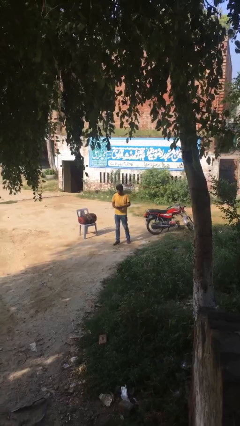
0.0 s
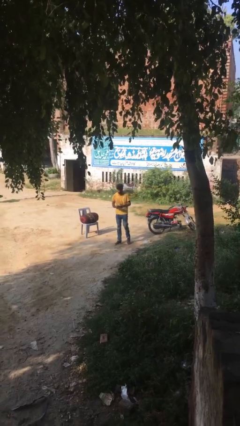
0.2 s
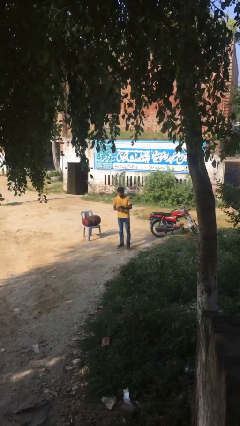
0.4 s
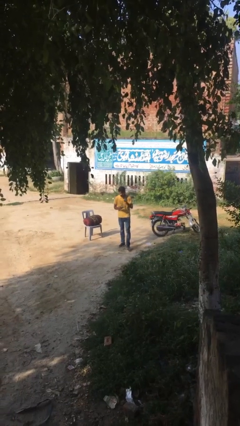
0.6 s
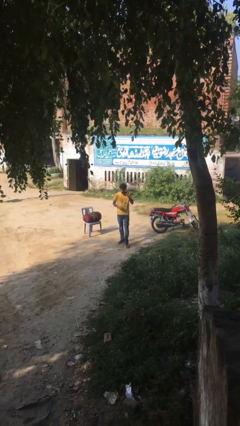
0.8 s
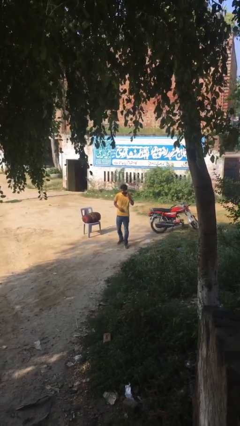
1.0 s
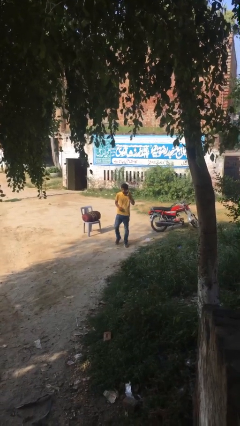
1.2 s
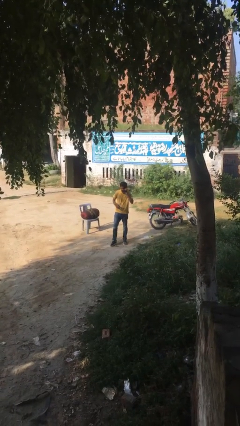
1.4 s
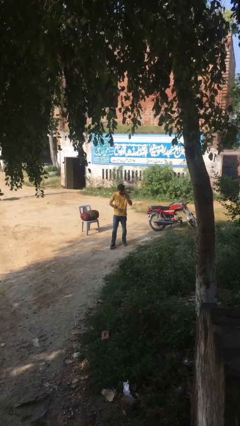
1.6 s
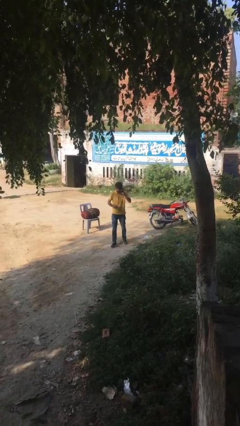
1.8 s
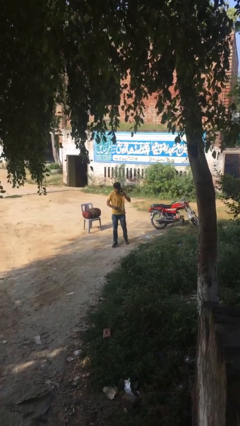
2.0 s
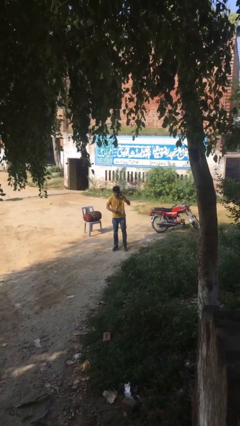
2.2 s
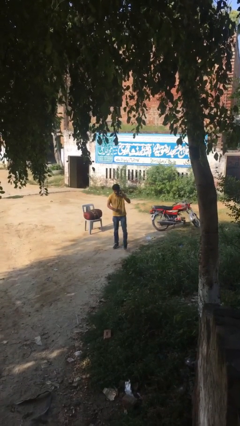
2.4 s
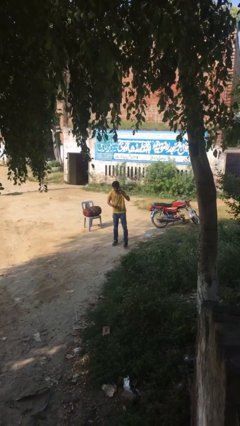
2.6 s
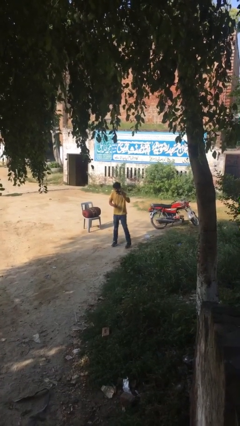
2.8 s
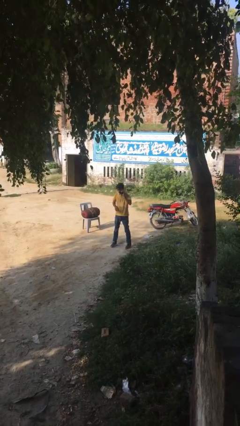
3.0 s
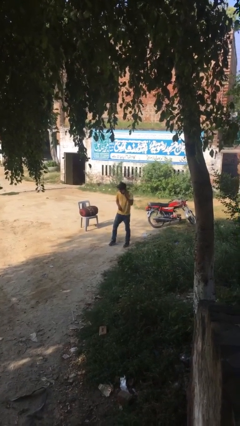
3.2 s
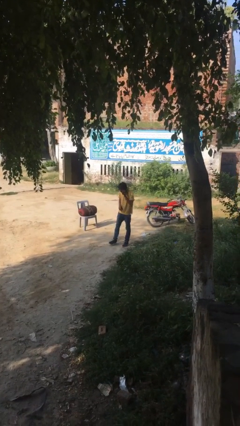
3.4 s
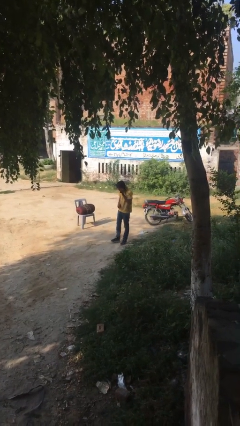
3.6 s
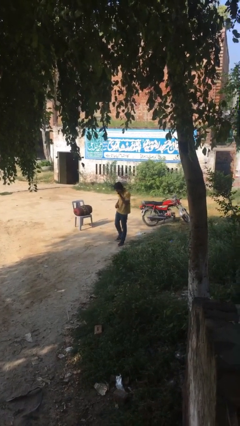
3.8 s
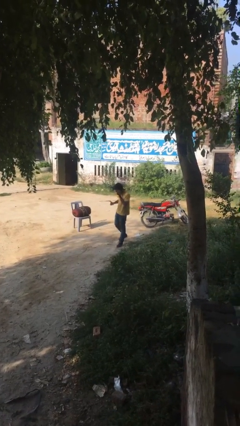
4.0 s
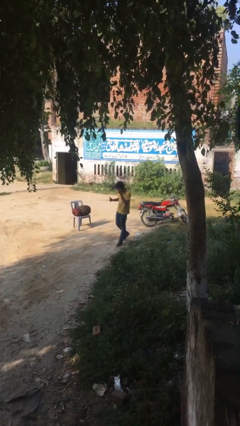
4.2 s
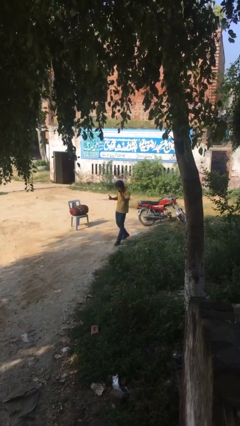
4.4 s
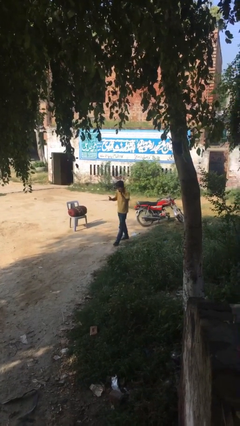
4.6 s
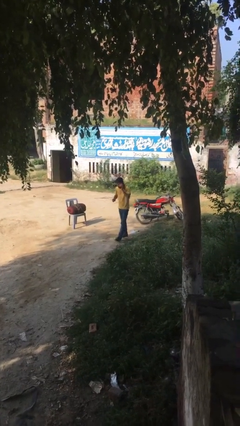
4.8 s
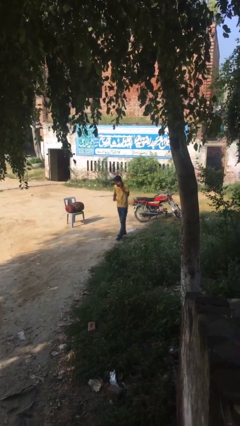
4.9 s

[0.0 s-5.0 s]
person talks on phone

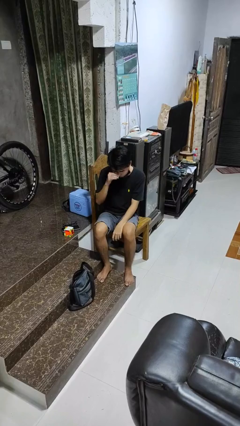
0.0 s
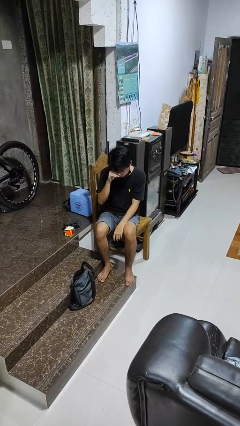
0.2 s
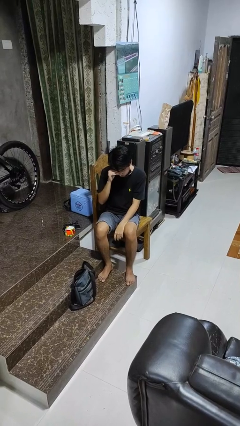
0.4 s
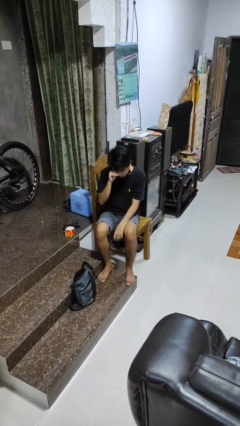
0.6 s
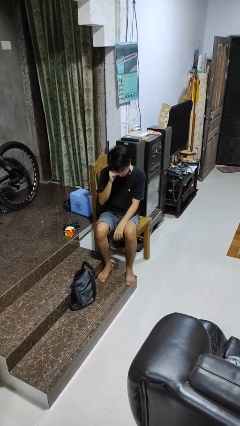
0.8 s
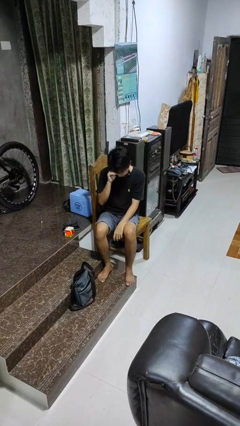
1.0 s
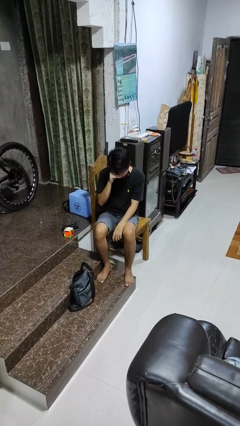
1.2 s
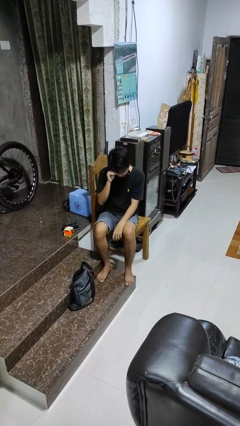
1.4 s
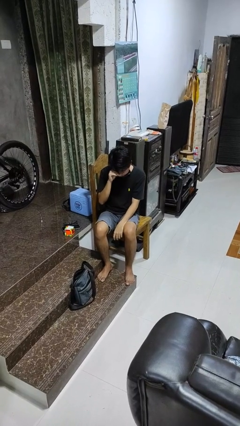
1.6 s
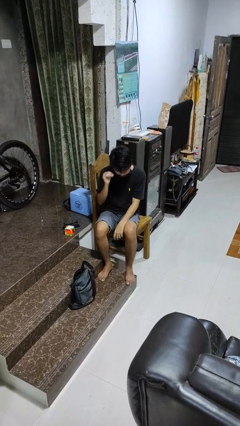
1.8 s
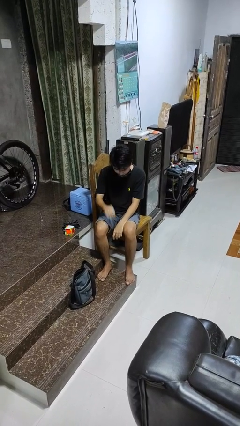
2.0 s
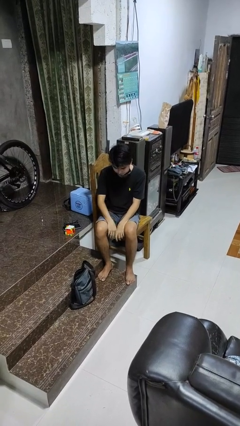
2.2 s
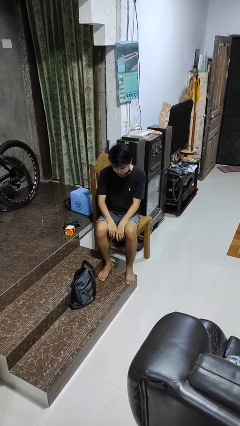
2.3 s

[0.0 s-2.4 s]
person rubs eyes

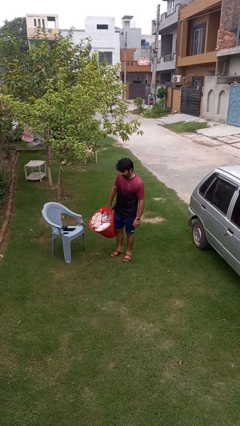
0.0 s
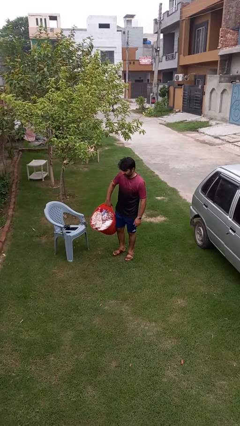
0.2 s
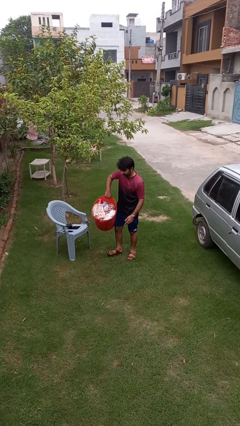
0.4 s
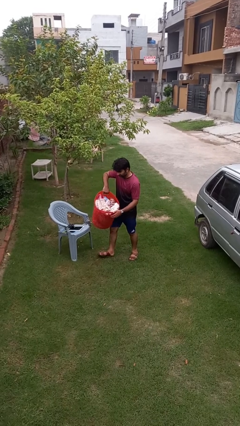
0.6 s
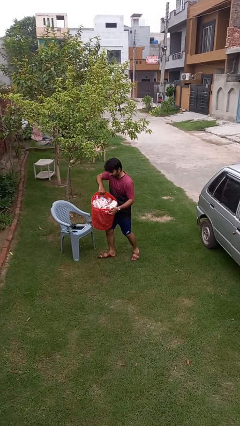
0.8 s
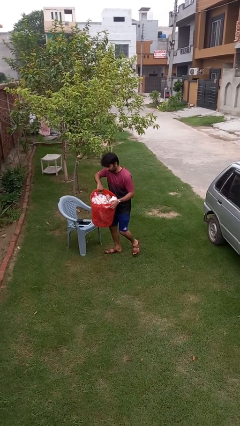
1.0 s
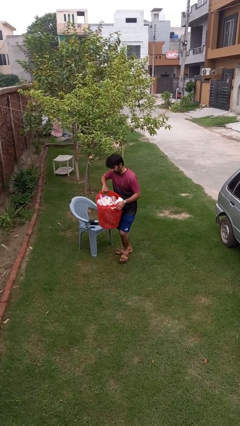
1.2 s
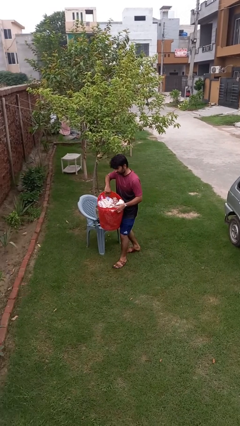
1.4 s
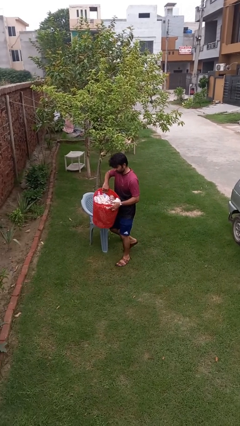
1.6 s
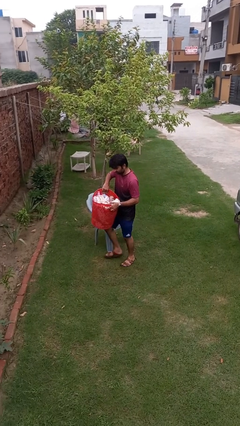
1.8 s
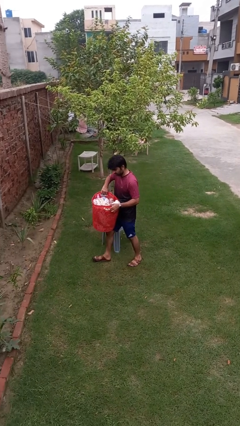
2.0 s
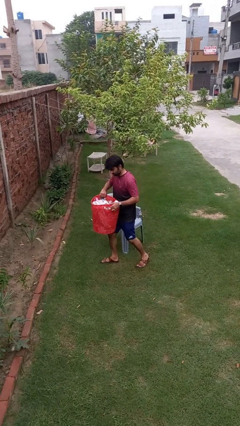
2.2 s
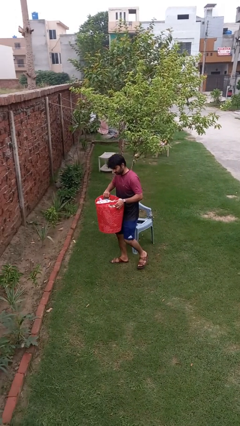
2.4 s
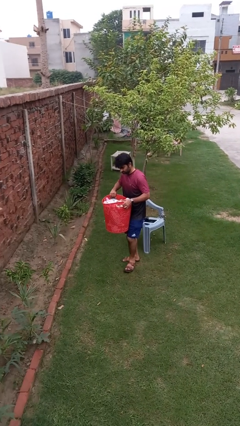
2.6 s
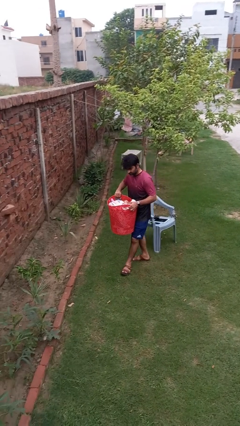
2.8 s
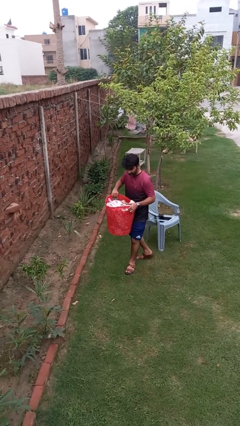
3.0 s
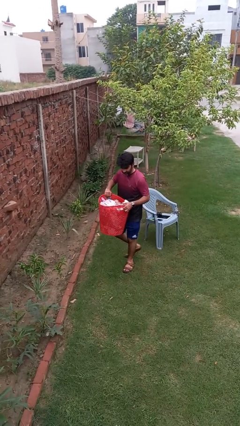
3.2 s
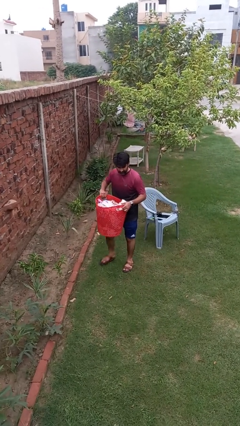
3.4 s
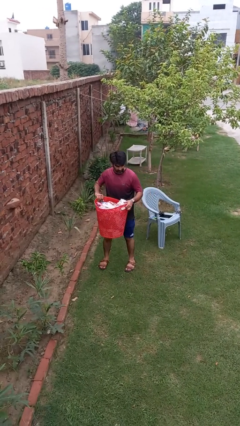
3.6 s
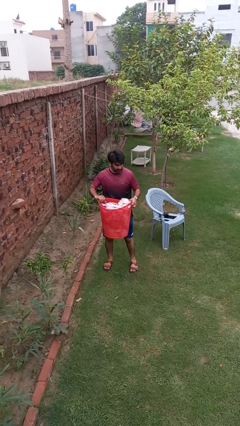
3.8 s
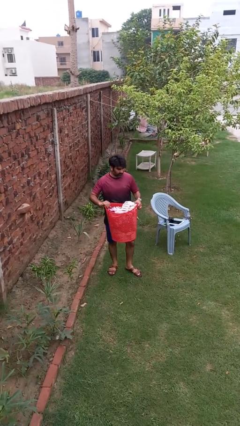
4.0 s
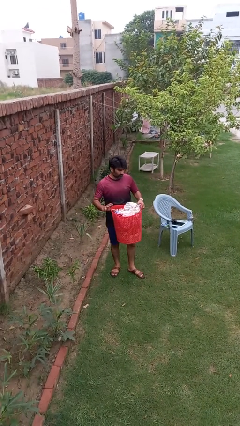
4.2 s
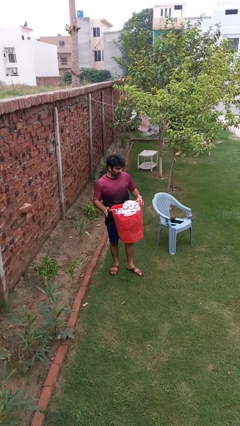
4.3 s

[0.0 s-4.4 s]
person carries laundry basket

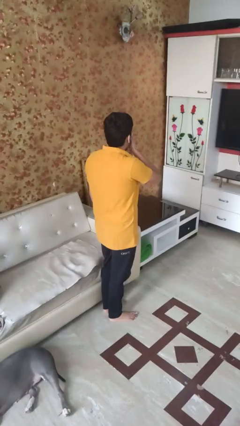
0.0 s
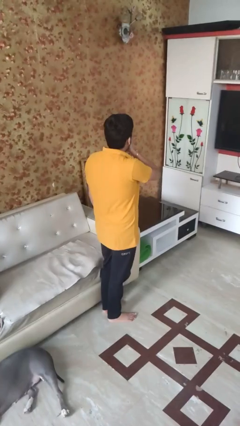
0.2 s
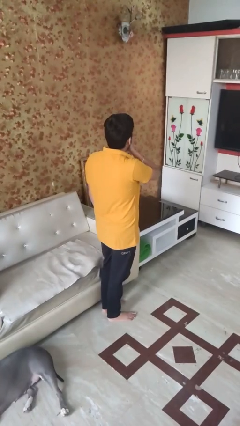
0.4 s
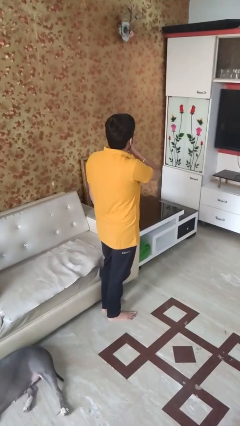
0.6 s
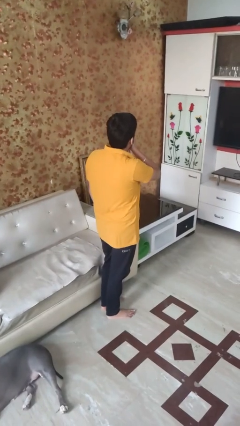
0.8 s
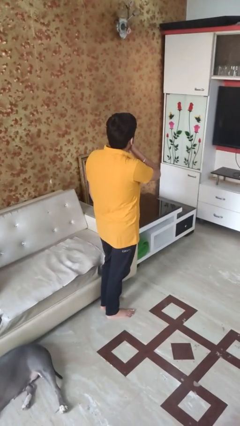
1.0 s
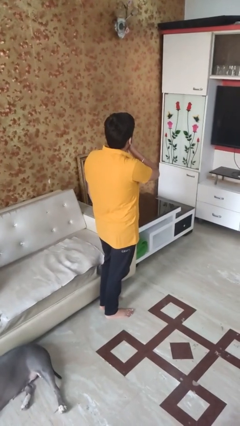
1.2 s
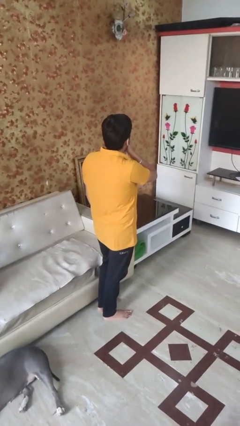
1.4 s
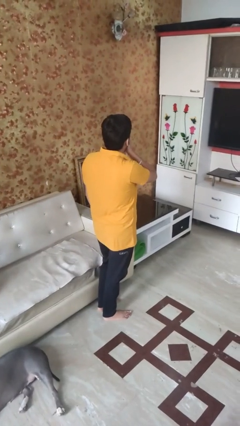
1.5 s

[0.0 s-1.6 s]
person yawns

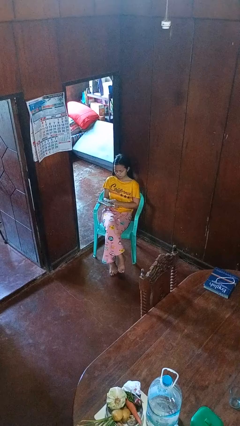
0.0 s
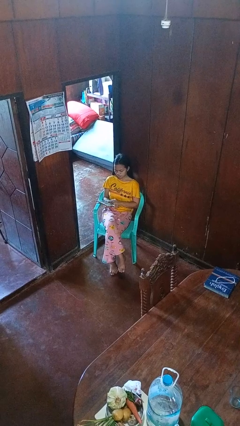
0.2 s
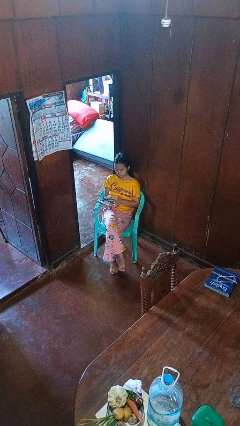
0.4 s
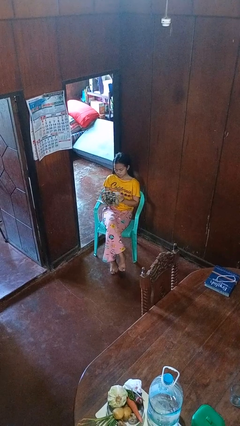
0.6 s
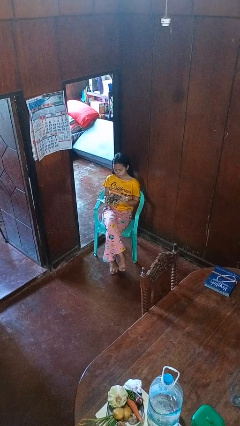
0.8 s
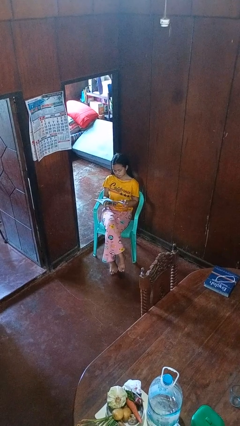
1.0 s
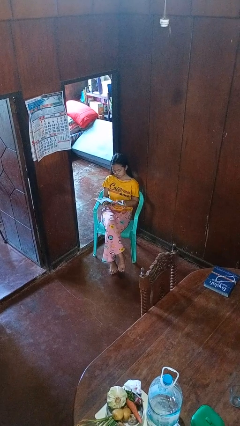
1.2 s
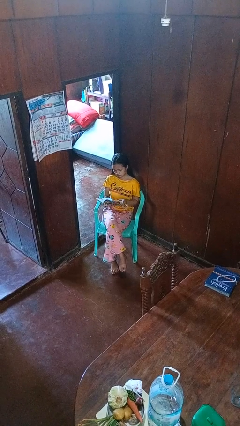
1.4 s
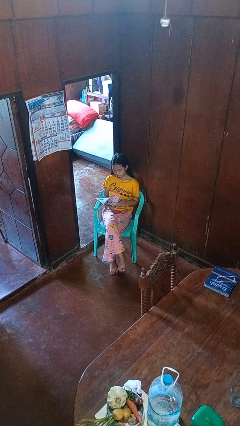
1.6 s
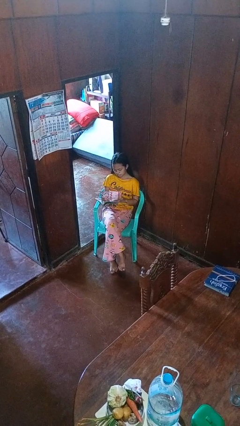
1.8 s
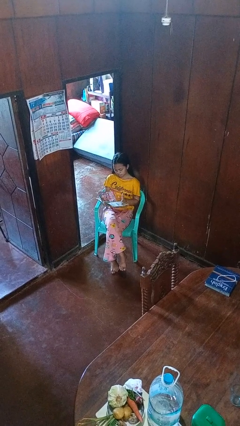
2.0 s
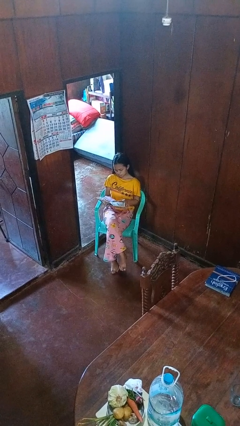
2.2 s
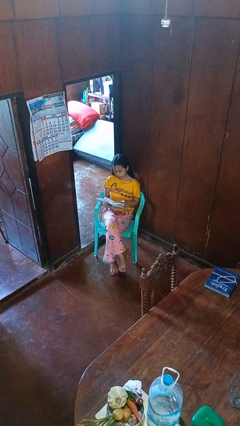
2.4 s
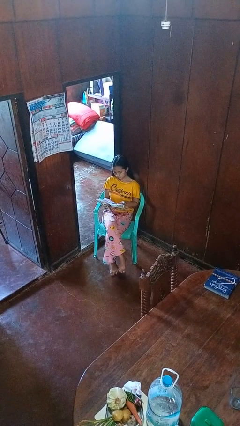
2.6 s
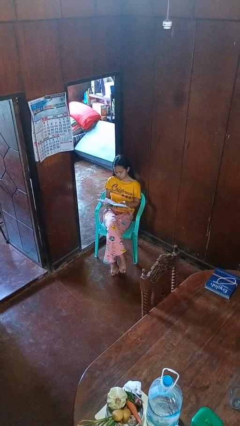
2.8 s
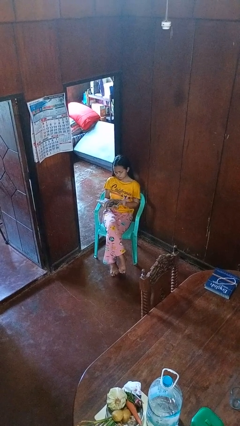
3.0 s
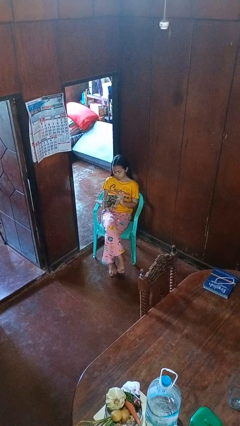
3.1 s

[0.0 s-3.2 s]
person reads magazine

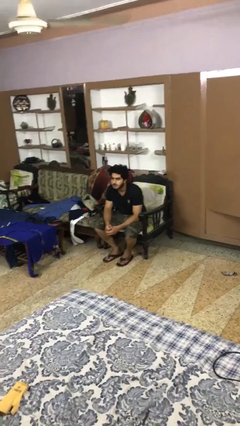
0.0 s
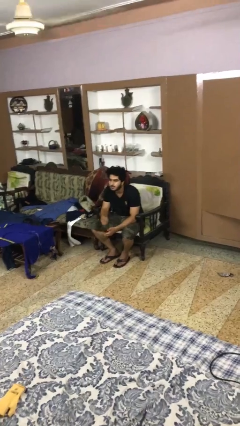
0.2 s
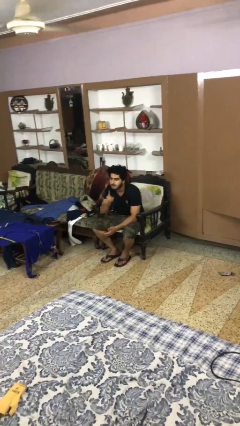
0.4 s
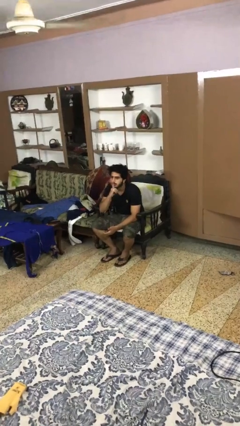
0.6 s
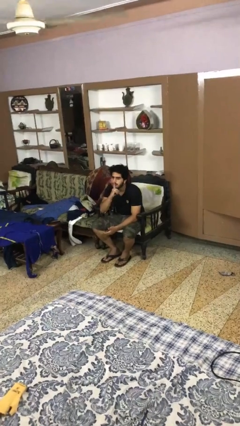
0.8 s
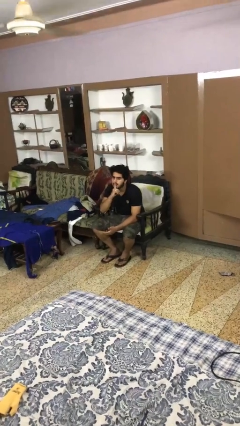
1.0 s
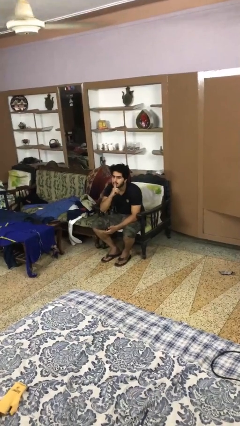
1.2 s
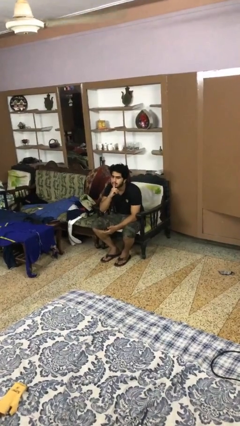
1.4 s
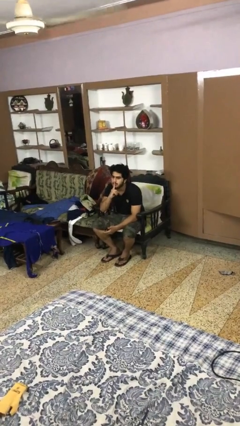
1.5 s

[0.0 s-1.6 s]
person gestures be quiet
